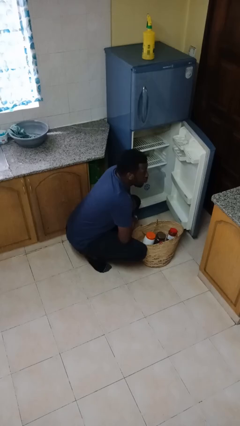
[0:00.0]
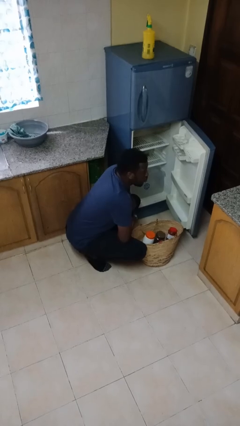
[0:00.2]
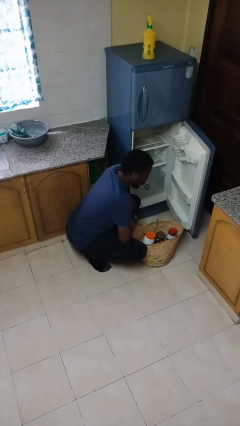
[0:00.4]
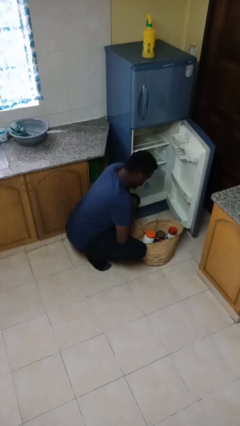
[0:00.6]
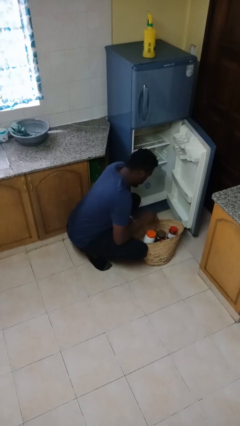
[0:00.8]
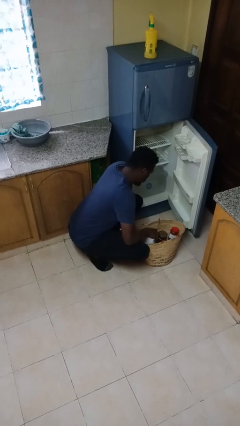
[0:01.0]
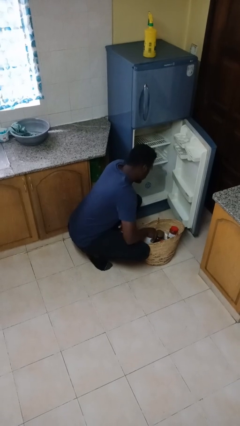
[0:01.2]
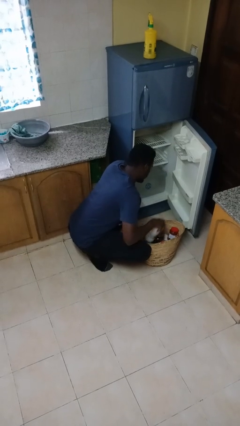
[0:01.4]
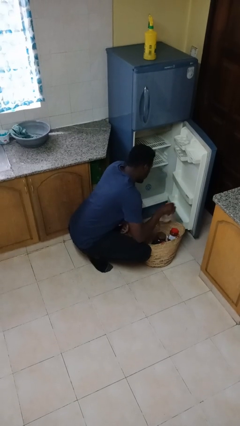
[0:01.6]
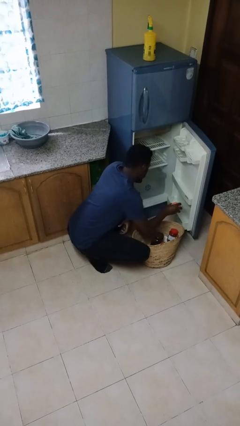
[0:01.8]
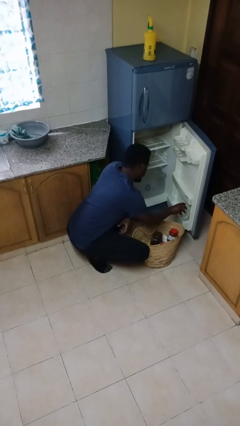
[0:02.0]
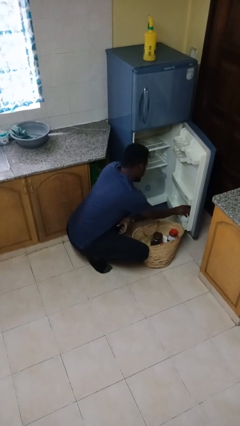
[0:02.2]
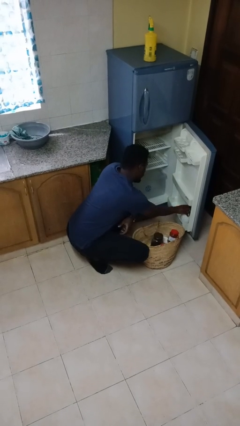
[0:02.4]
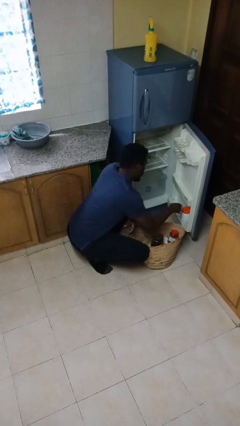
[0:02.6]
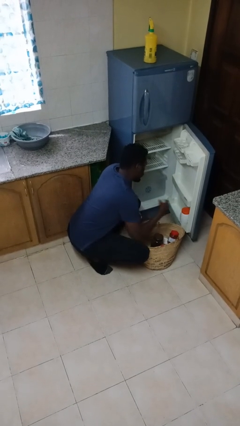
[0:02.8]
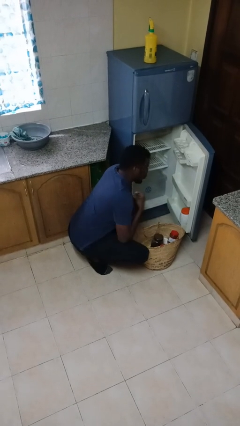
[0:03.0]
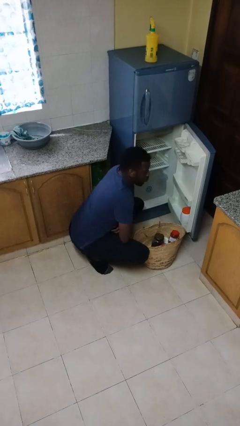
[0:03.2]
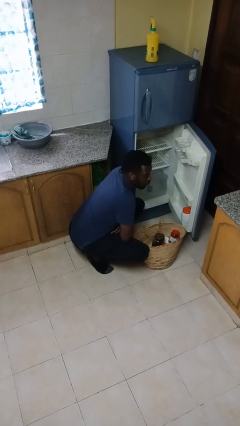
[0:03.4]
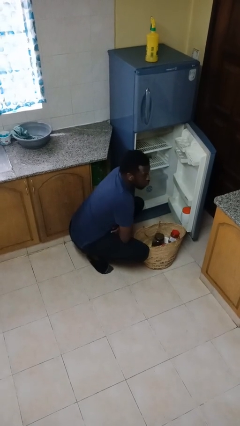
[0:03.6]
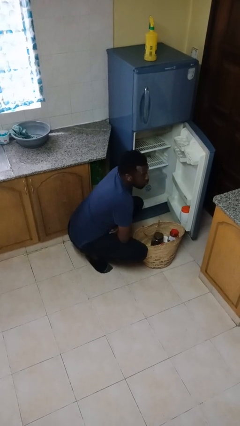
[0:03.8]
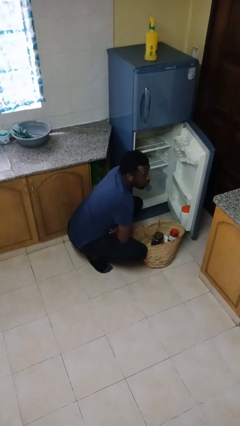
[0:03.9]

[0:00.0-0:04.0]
person loads groceries into refrigerator

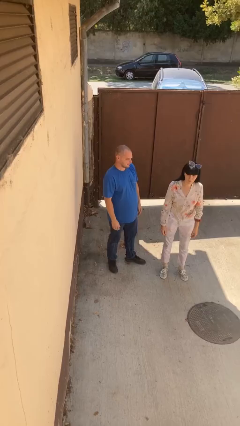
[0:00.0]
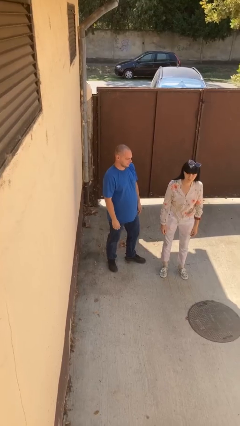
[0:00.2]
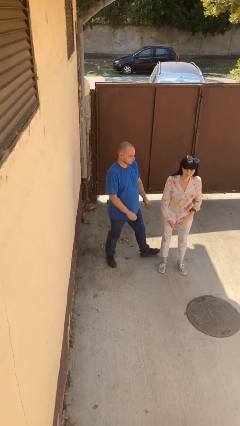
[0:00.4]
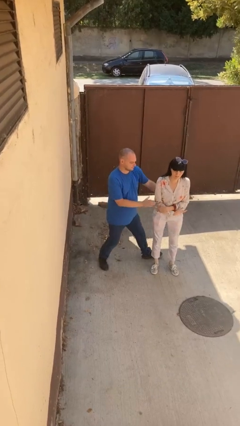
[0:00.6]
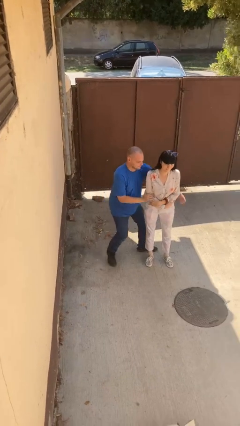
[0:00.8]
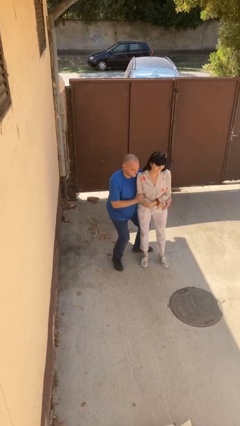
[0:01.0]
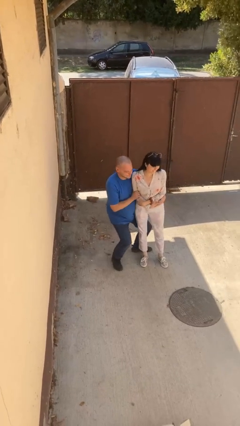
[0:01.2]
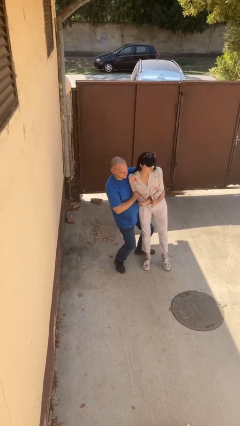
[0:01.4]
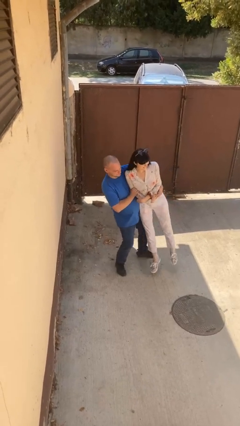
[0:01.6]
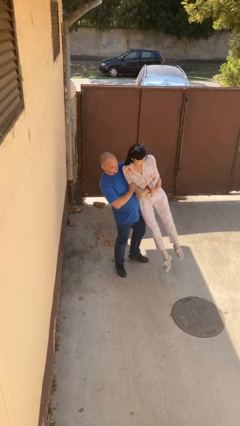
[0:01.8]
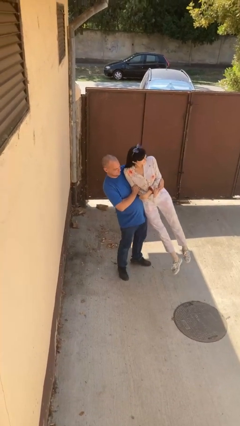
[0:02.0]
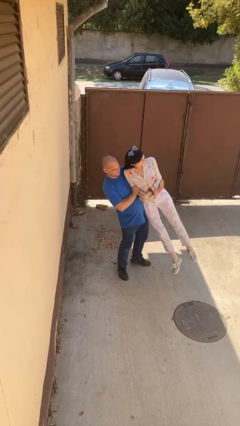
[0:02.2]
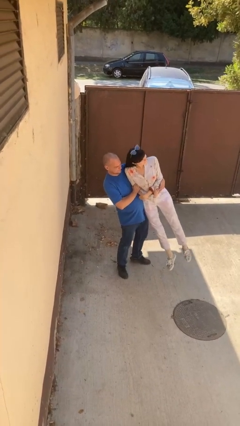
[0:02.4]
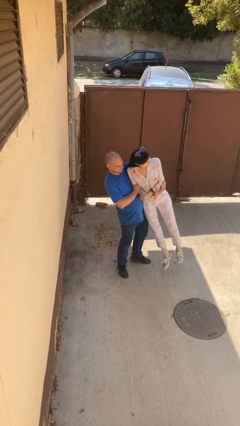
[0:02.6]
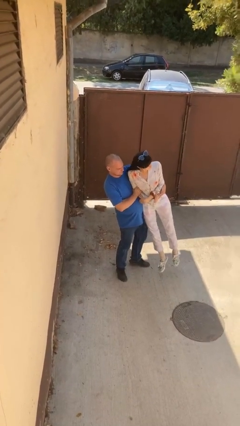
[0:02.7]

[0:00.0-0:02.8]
person picks up person

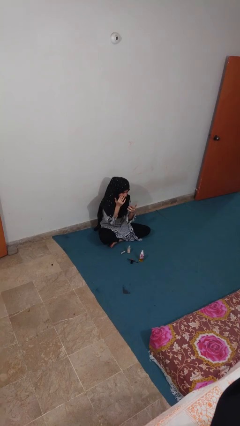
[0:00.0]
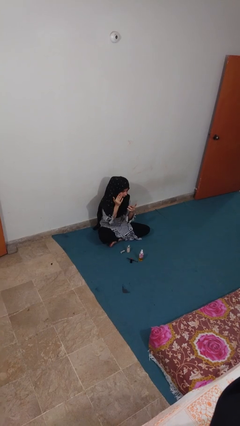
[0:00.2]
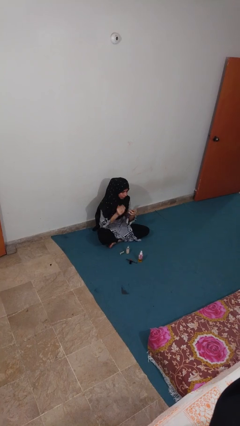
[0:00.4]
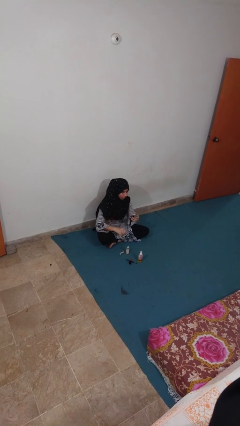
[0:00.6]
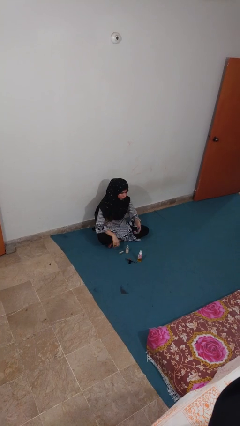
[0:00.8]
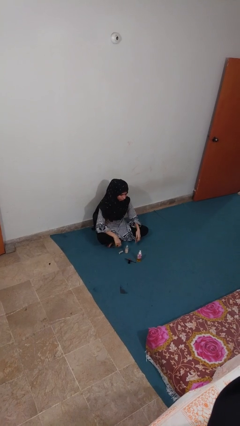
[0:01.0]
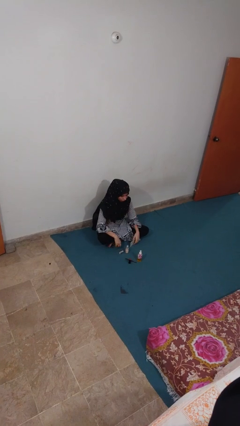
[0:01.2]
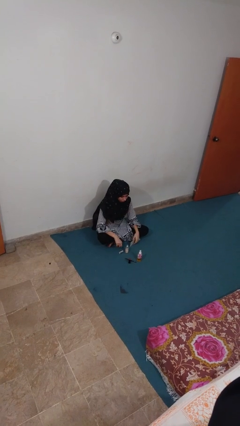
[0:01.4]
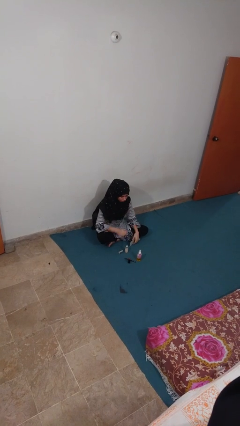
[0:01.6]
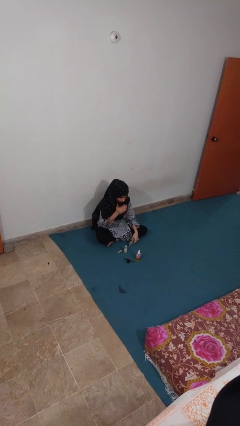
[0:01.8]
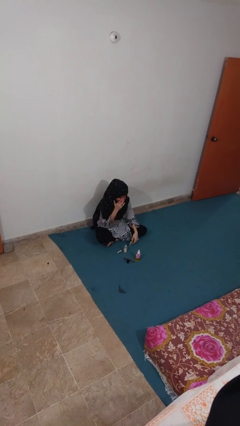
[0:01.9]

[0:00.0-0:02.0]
person applies foundation makeup

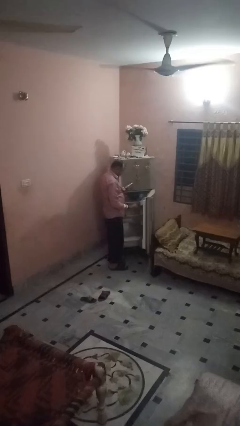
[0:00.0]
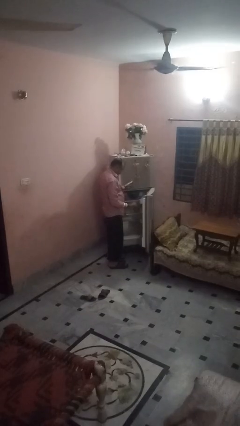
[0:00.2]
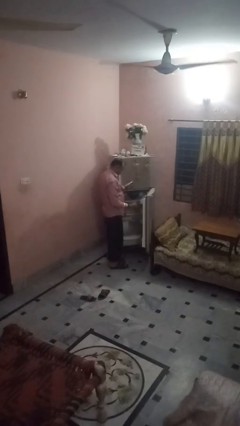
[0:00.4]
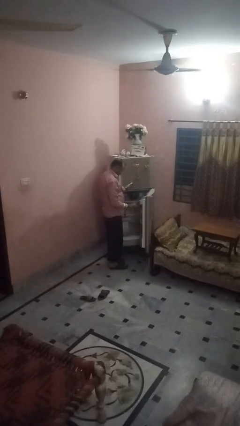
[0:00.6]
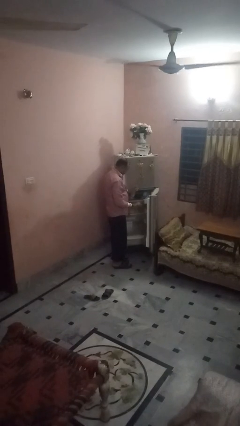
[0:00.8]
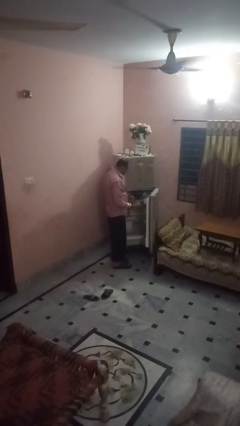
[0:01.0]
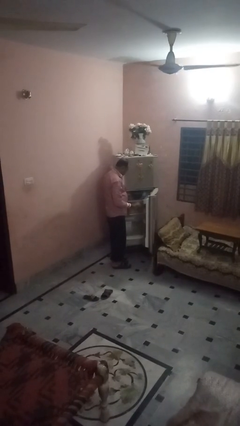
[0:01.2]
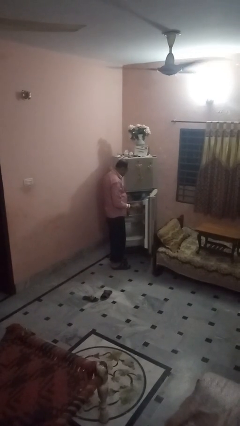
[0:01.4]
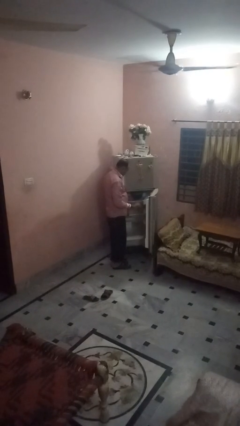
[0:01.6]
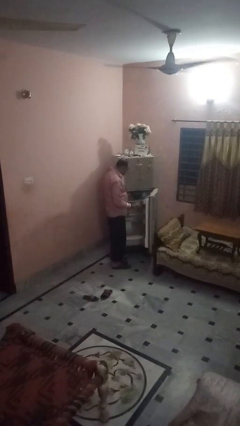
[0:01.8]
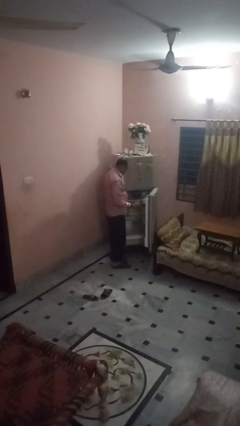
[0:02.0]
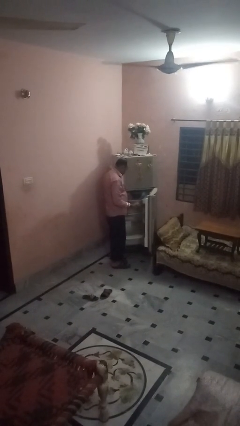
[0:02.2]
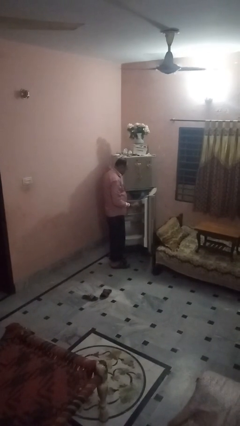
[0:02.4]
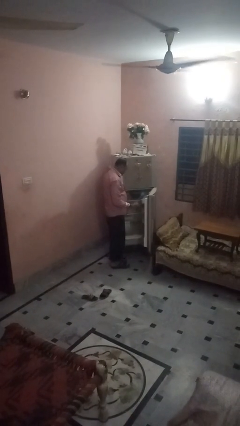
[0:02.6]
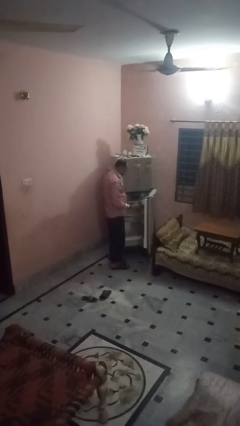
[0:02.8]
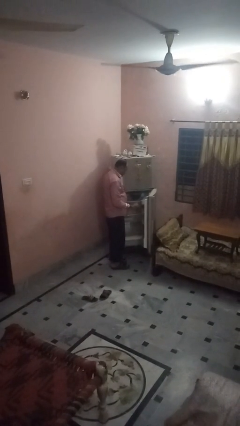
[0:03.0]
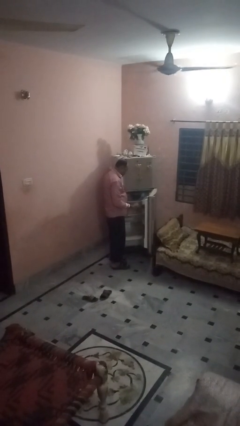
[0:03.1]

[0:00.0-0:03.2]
person takes object from refrigerator

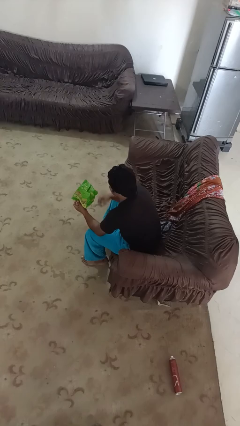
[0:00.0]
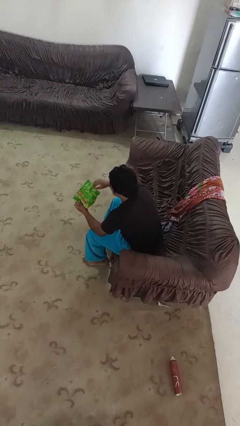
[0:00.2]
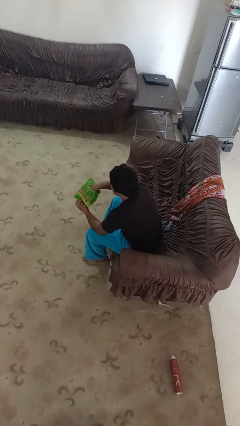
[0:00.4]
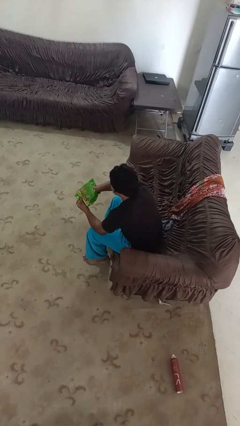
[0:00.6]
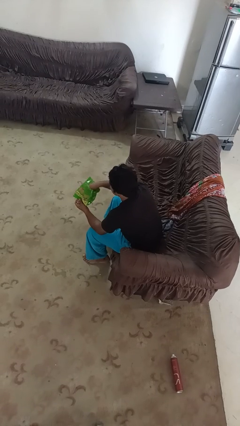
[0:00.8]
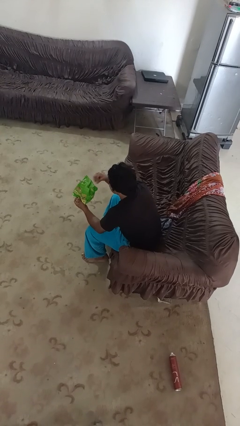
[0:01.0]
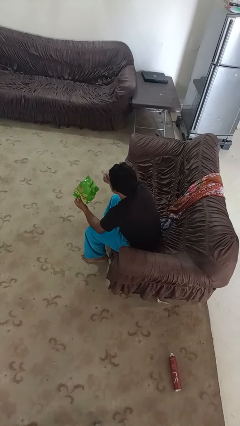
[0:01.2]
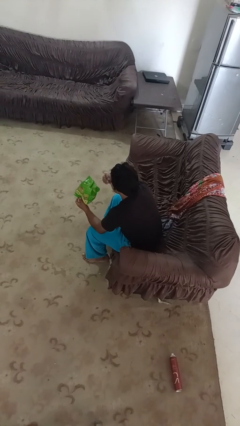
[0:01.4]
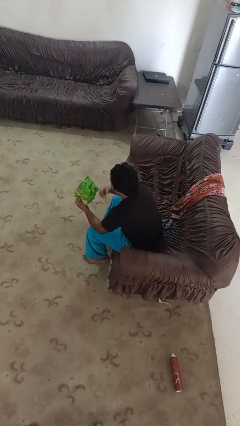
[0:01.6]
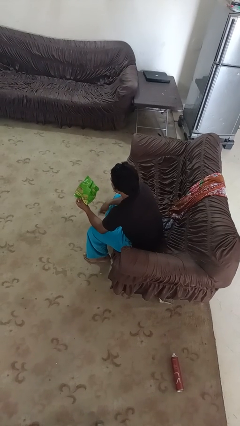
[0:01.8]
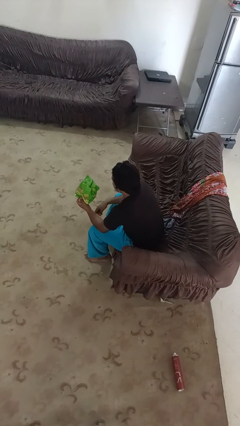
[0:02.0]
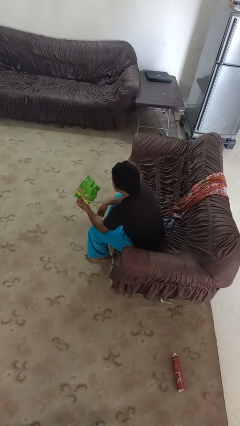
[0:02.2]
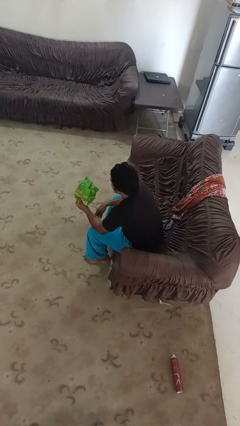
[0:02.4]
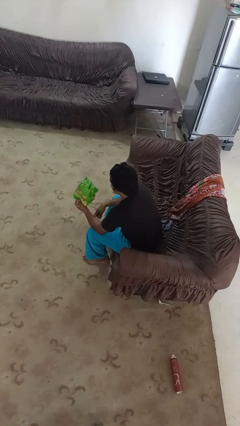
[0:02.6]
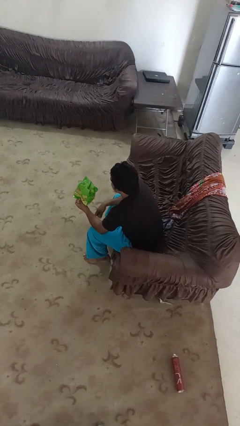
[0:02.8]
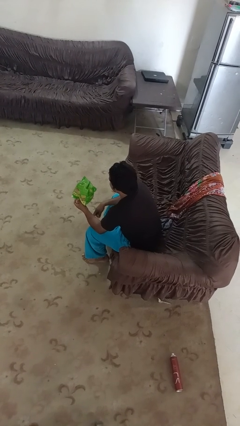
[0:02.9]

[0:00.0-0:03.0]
person eats snack from bag

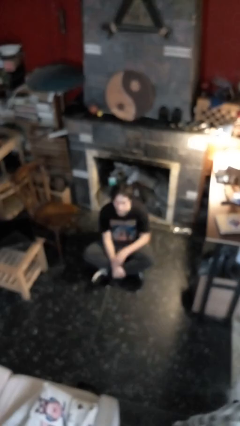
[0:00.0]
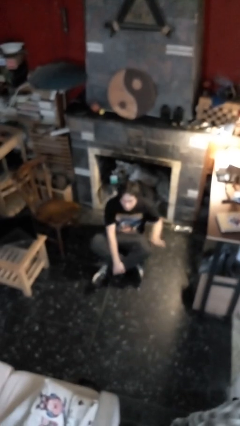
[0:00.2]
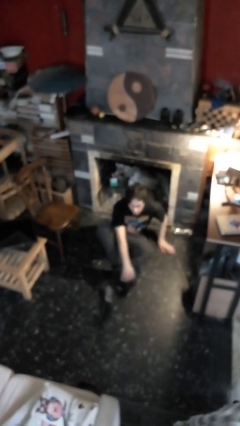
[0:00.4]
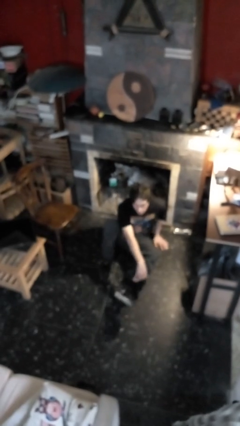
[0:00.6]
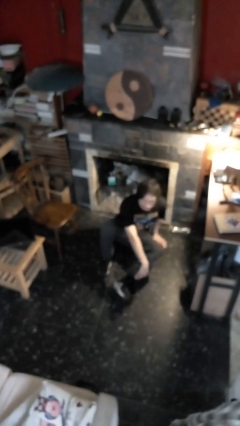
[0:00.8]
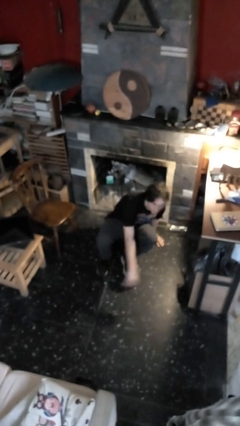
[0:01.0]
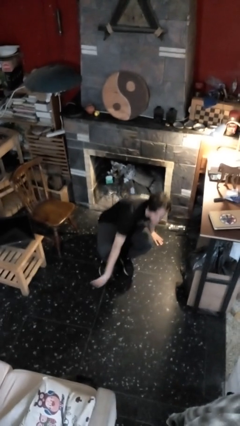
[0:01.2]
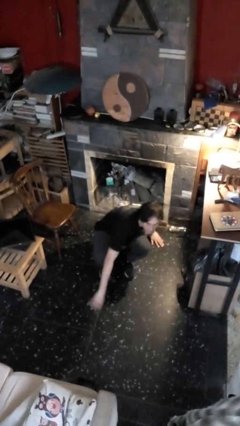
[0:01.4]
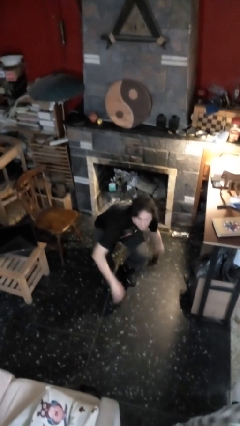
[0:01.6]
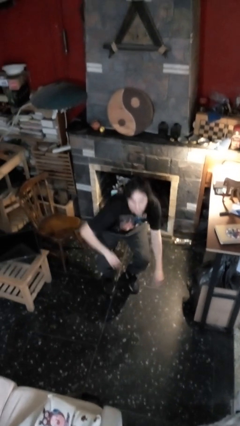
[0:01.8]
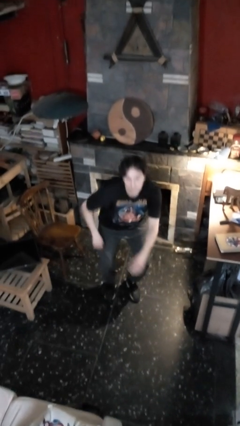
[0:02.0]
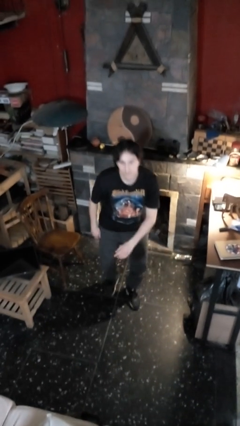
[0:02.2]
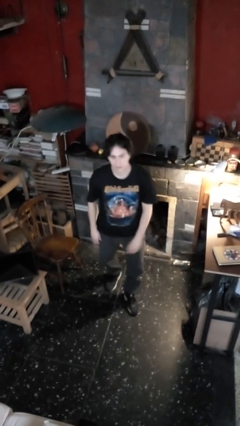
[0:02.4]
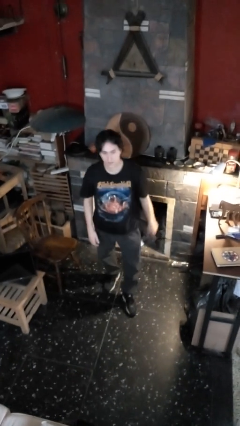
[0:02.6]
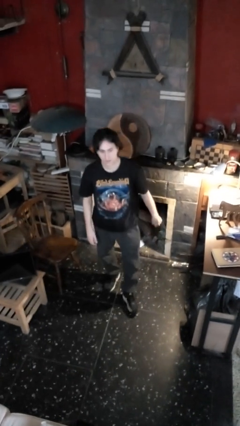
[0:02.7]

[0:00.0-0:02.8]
person stands up from floor
